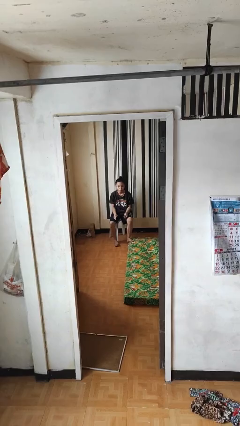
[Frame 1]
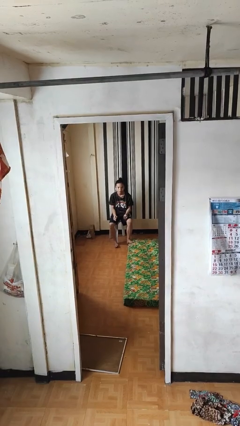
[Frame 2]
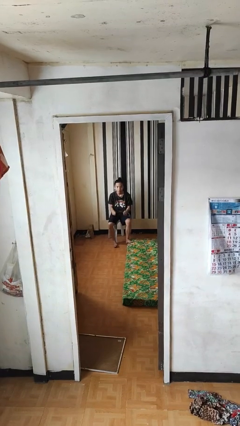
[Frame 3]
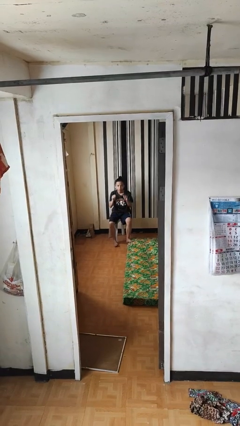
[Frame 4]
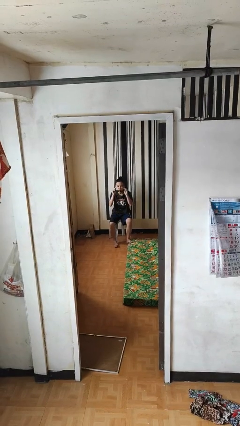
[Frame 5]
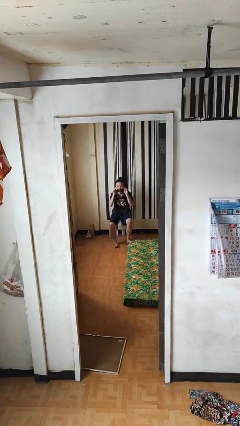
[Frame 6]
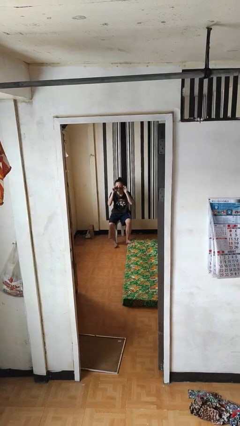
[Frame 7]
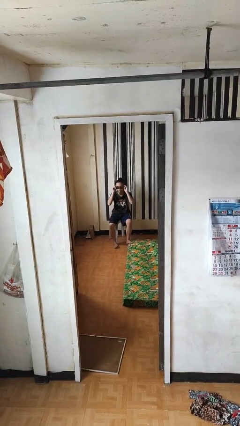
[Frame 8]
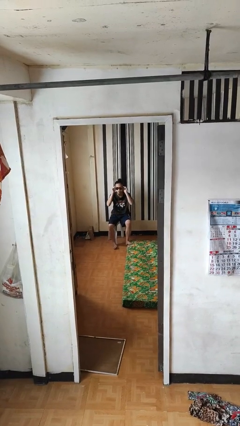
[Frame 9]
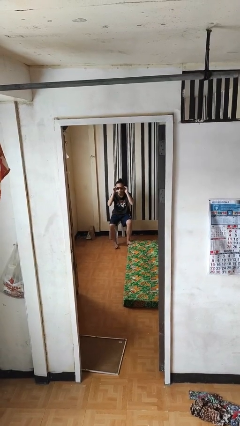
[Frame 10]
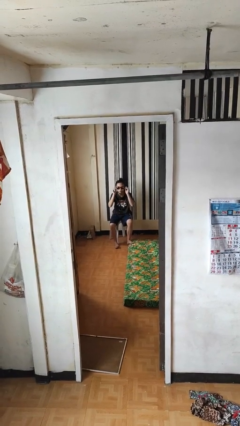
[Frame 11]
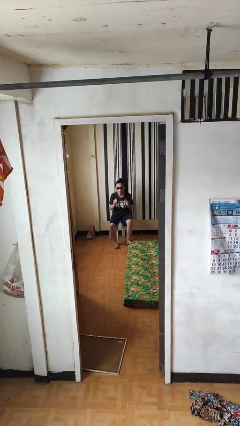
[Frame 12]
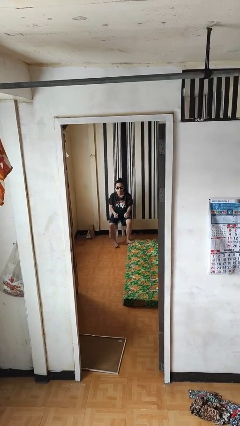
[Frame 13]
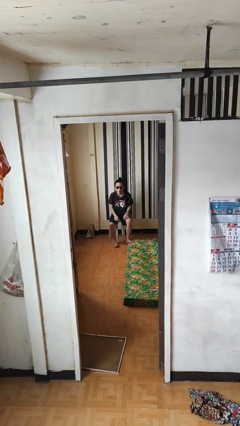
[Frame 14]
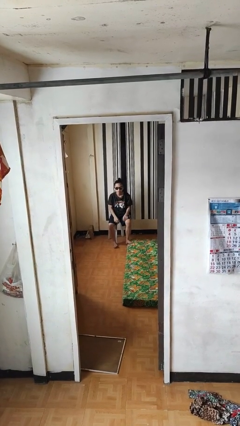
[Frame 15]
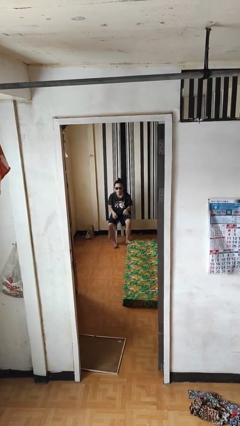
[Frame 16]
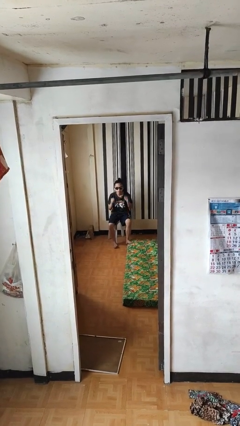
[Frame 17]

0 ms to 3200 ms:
person puts on sunglasses

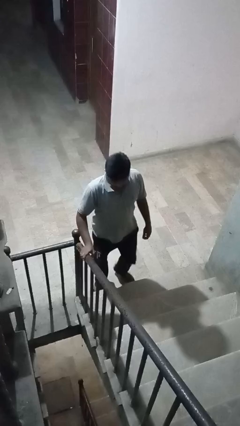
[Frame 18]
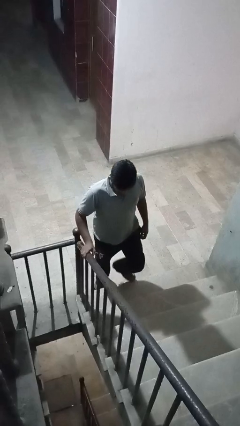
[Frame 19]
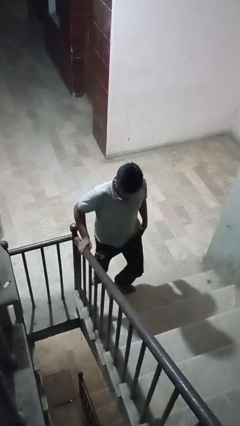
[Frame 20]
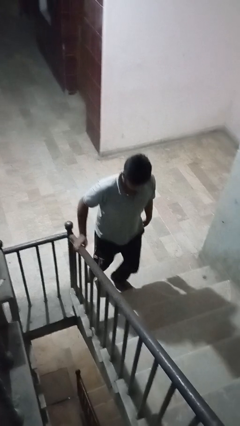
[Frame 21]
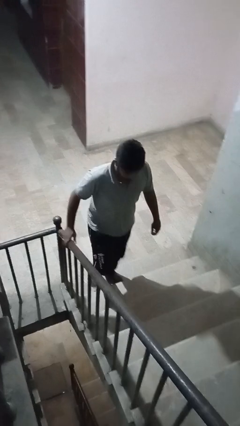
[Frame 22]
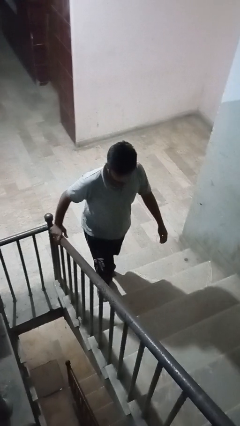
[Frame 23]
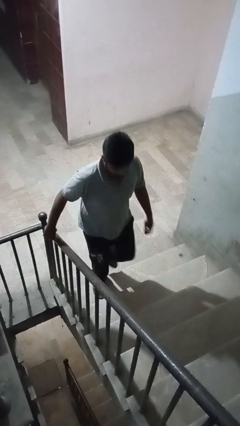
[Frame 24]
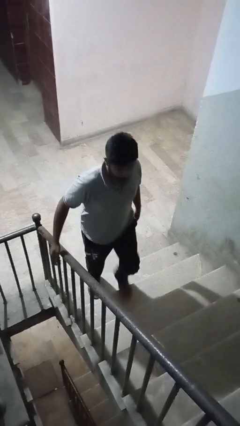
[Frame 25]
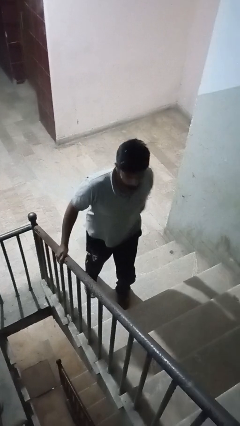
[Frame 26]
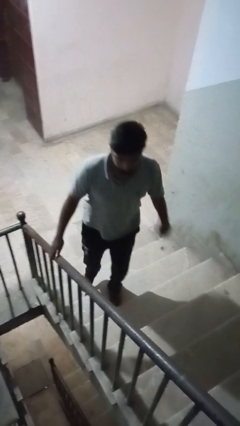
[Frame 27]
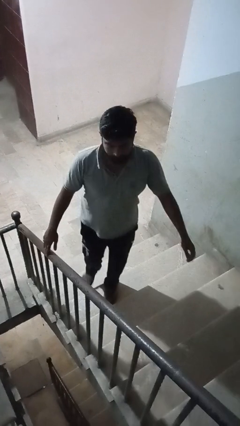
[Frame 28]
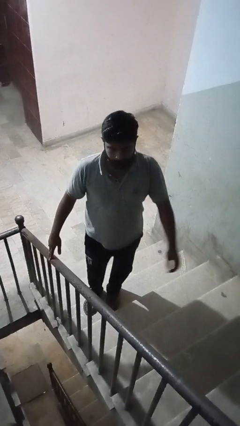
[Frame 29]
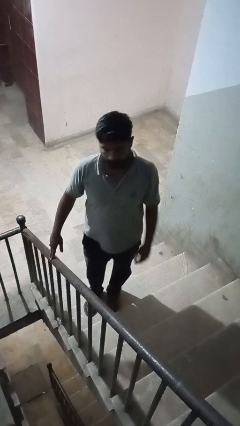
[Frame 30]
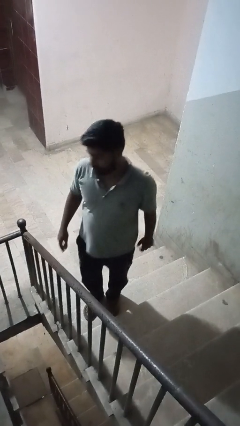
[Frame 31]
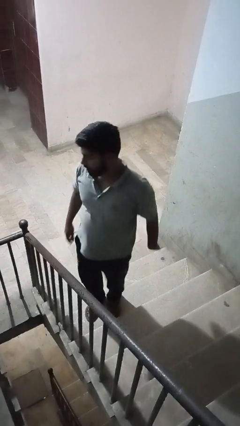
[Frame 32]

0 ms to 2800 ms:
person climbs up stairs

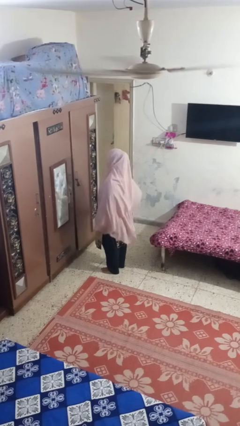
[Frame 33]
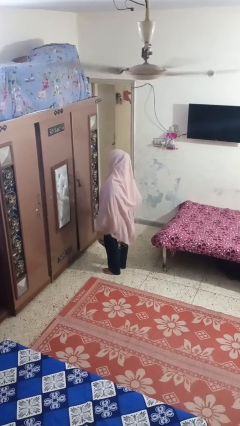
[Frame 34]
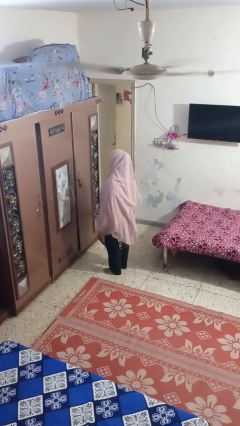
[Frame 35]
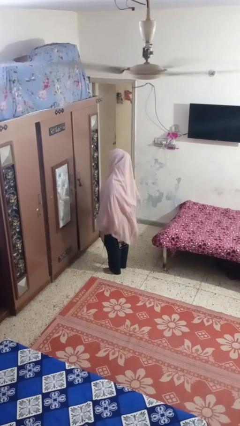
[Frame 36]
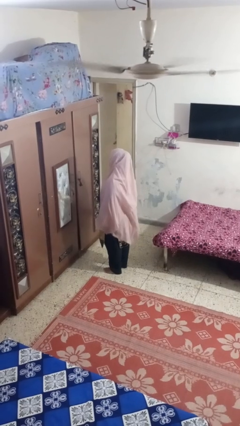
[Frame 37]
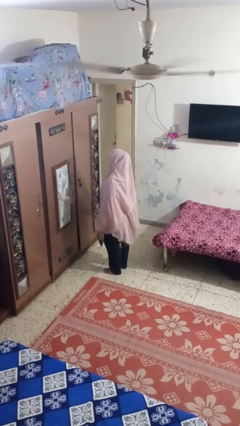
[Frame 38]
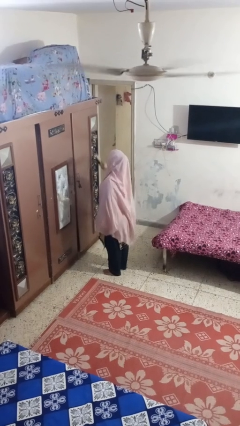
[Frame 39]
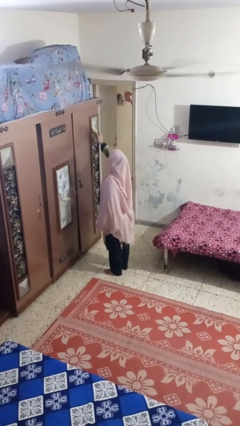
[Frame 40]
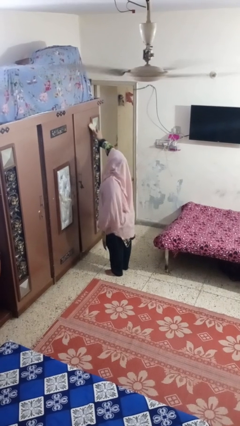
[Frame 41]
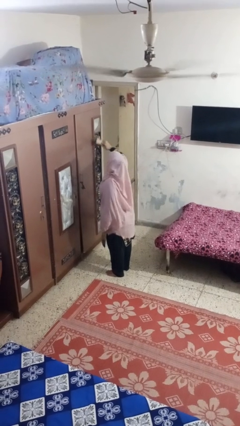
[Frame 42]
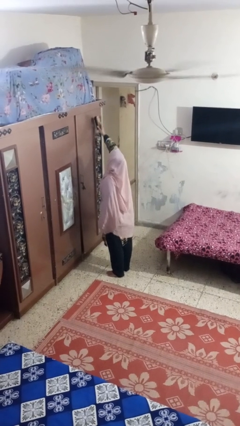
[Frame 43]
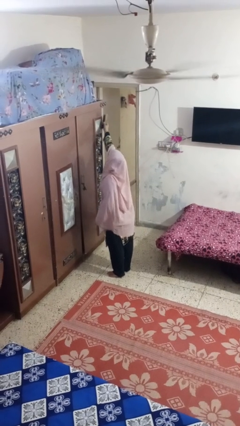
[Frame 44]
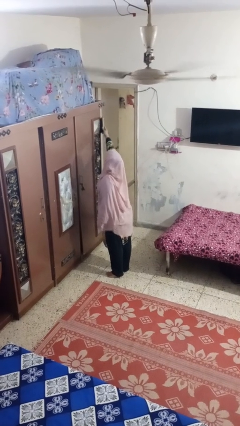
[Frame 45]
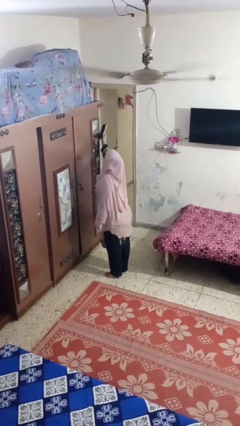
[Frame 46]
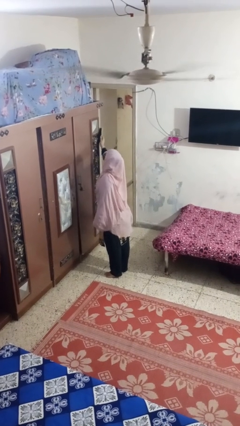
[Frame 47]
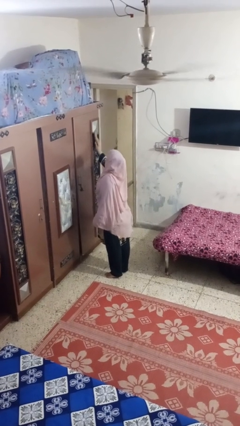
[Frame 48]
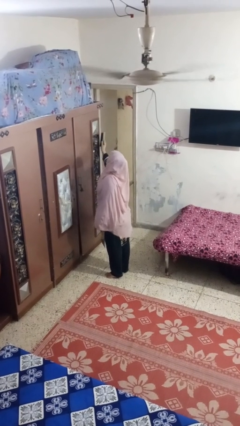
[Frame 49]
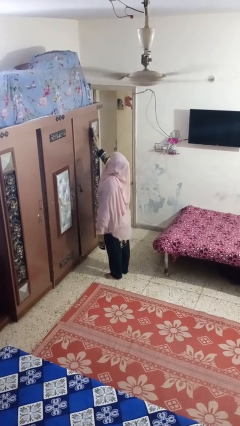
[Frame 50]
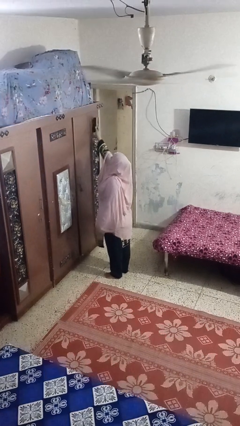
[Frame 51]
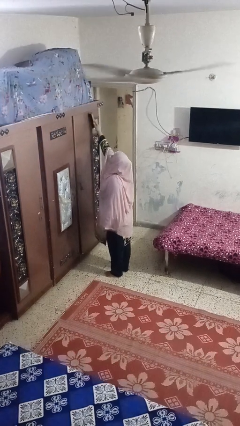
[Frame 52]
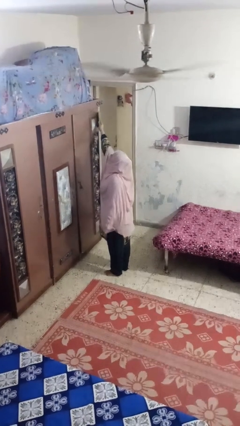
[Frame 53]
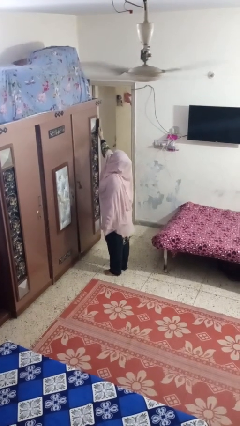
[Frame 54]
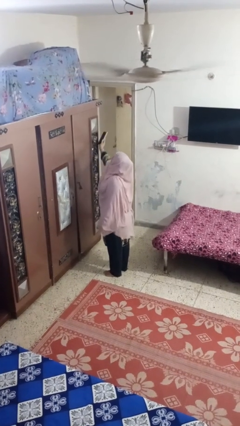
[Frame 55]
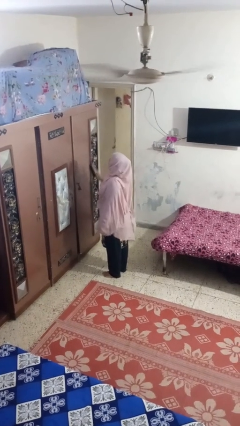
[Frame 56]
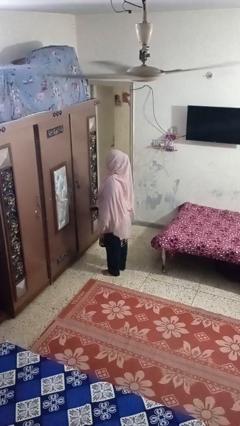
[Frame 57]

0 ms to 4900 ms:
person dusts furniture

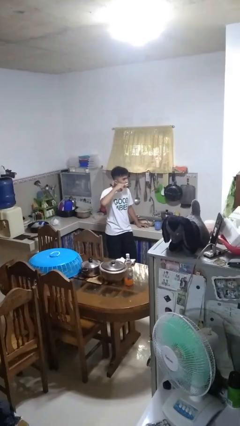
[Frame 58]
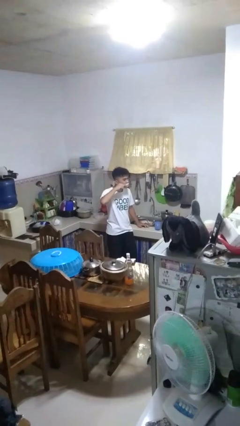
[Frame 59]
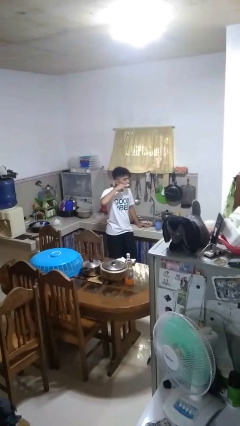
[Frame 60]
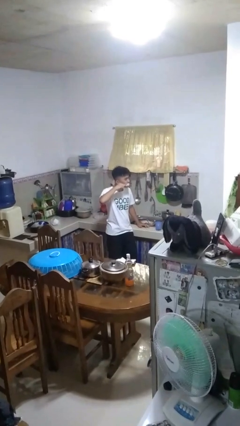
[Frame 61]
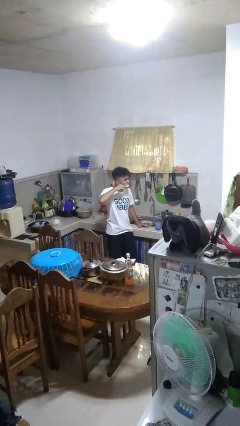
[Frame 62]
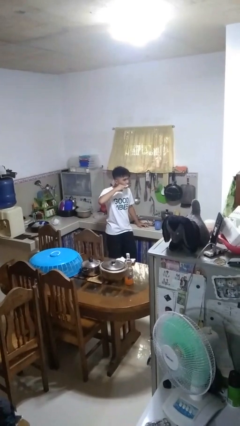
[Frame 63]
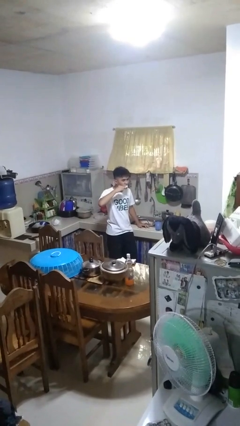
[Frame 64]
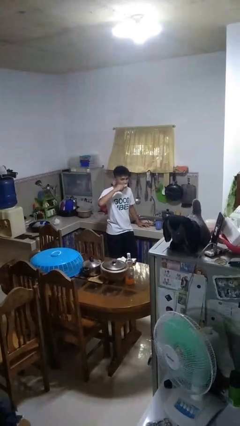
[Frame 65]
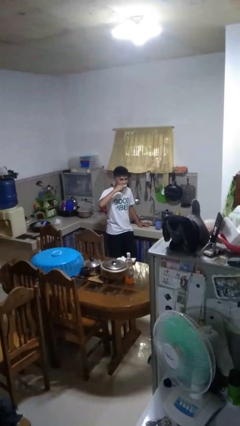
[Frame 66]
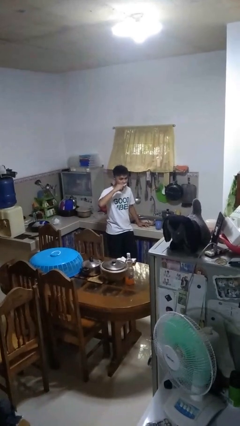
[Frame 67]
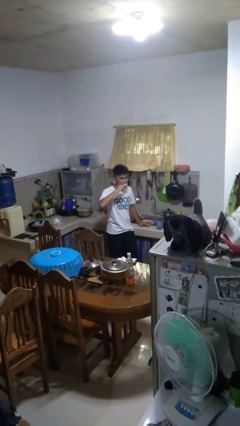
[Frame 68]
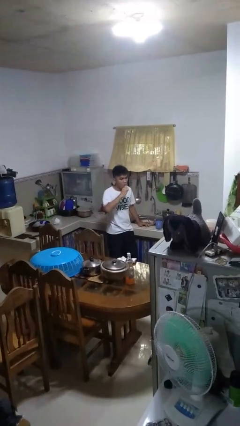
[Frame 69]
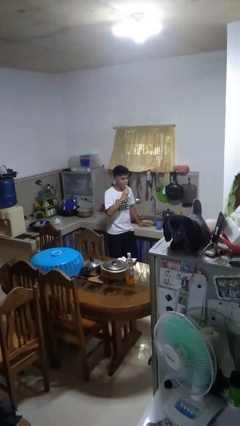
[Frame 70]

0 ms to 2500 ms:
person brushes teeth

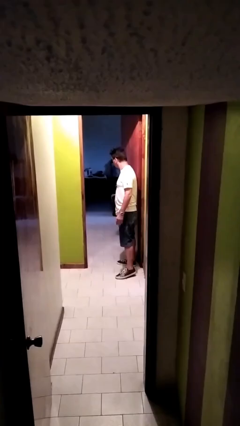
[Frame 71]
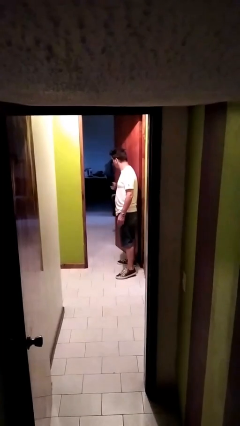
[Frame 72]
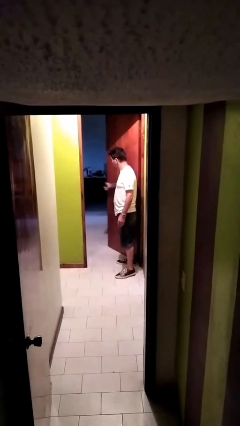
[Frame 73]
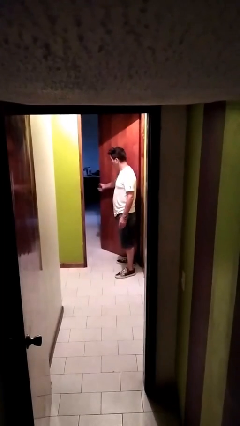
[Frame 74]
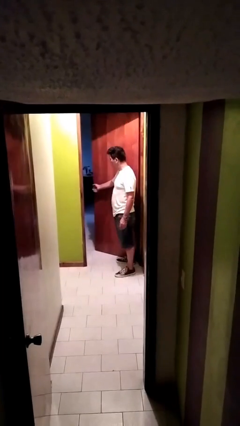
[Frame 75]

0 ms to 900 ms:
person closes facility door

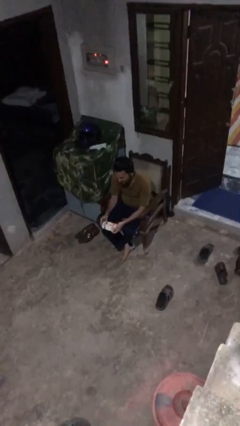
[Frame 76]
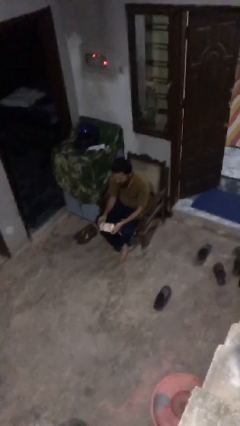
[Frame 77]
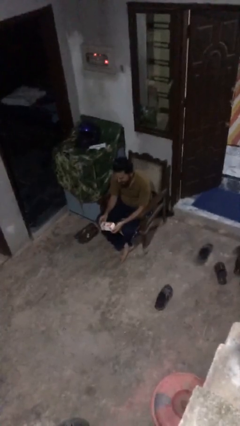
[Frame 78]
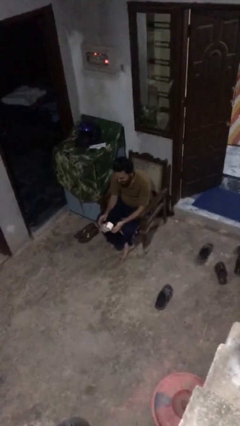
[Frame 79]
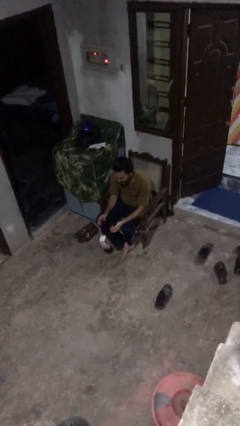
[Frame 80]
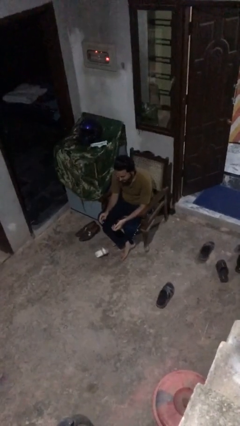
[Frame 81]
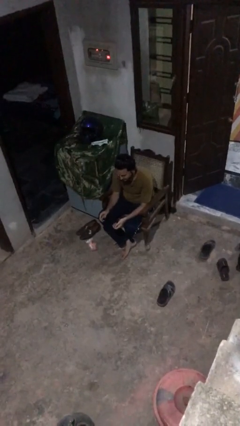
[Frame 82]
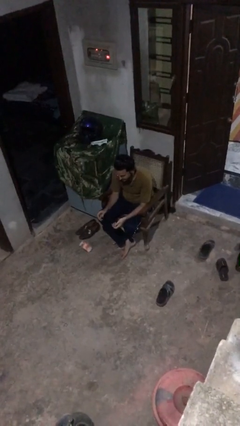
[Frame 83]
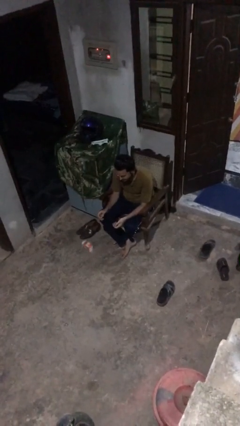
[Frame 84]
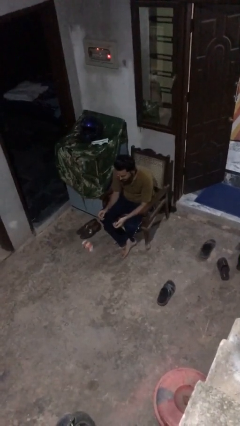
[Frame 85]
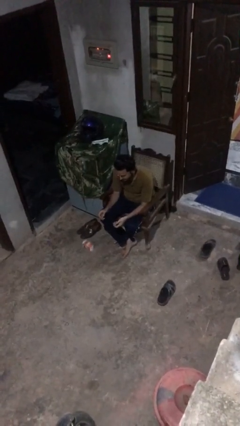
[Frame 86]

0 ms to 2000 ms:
person drops object

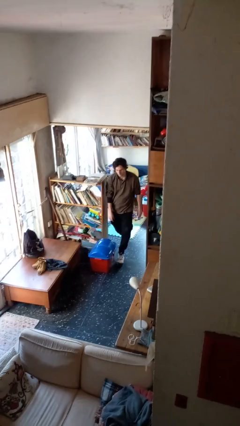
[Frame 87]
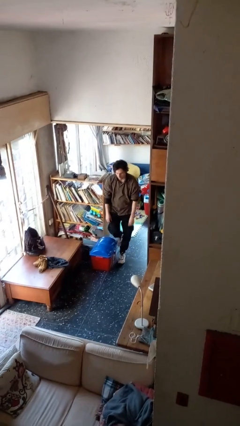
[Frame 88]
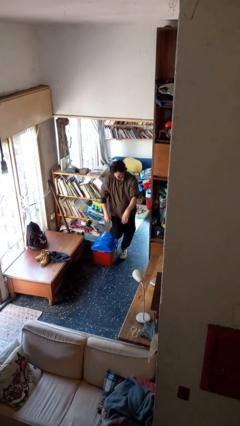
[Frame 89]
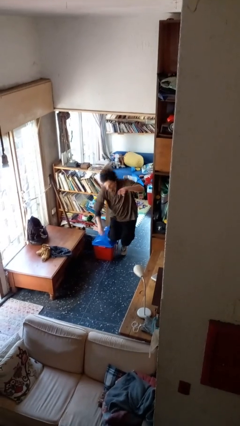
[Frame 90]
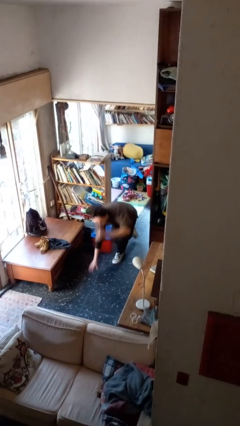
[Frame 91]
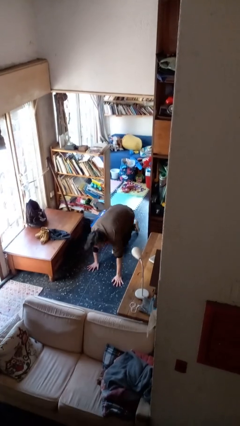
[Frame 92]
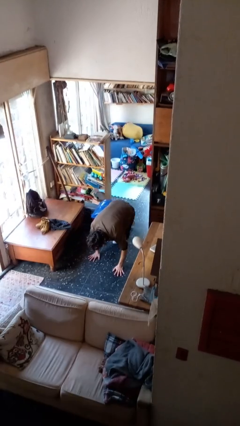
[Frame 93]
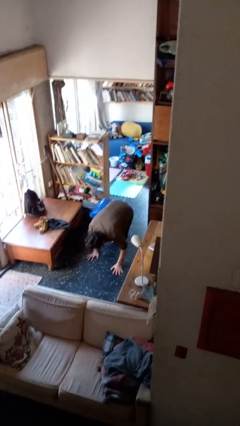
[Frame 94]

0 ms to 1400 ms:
person trips on object on floor
